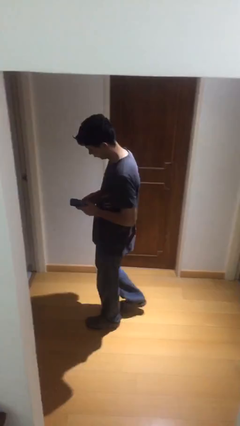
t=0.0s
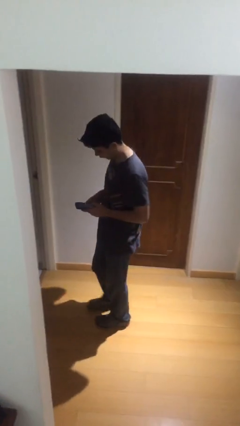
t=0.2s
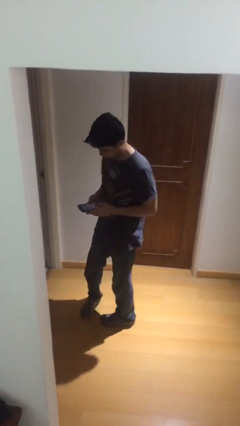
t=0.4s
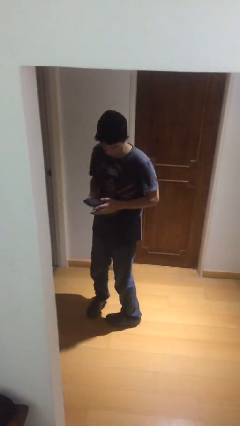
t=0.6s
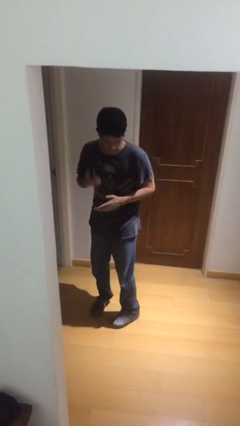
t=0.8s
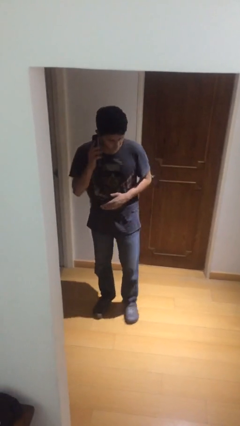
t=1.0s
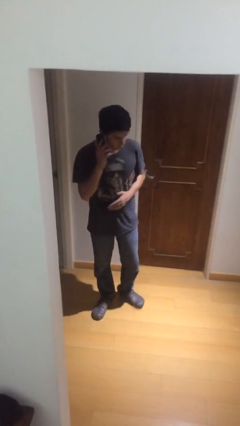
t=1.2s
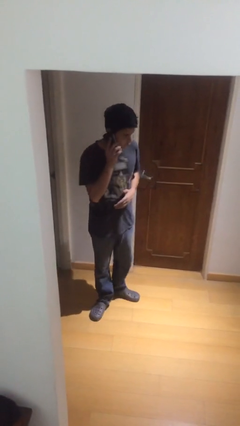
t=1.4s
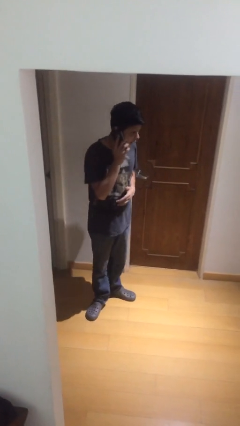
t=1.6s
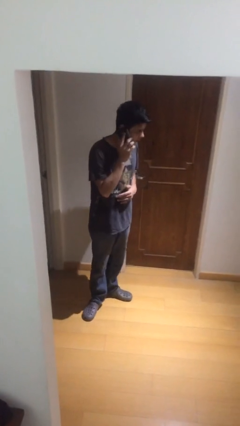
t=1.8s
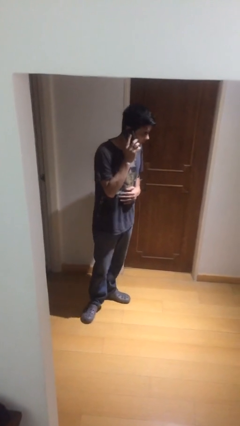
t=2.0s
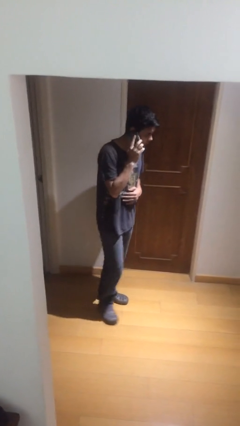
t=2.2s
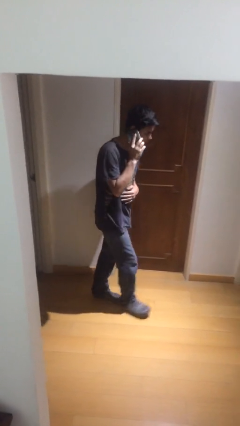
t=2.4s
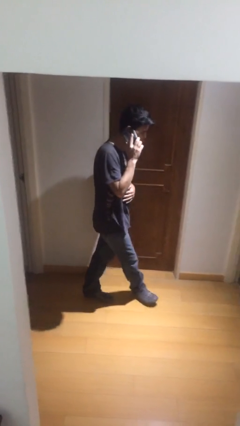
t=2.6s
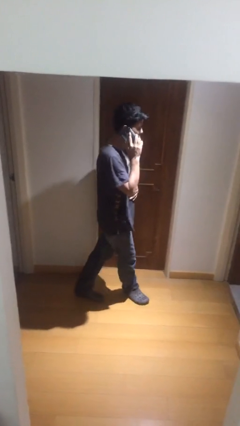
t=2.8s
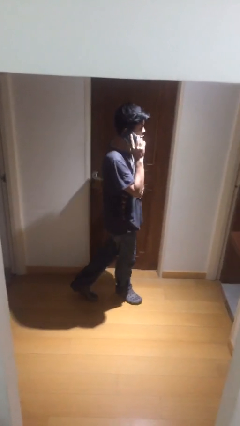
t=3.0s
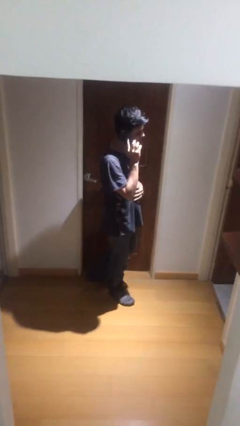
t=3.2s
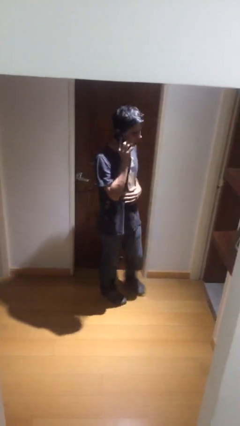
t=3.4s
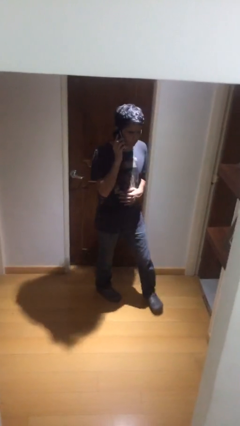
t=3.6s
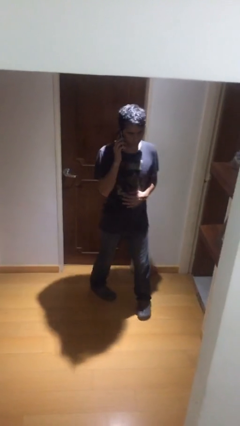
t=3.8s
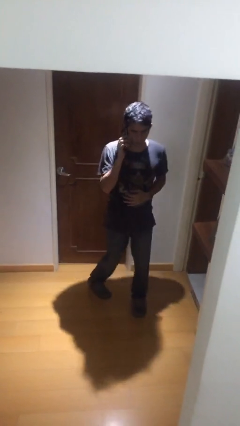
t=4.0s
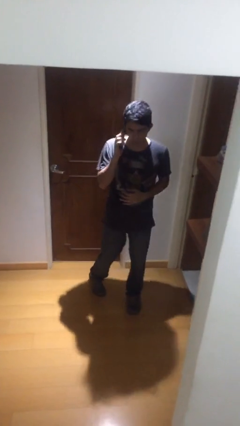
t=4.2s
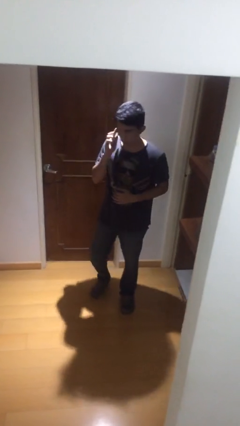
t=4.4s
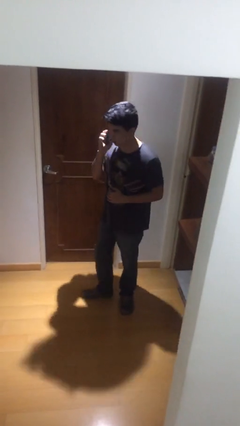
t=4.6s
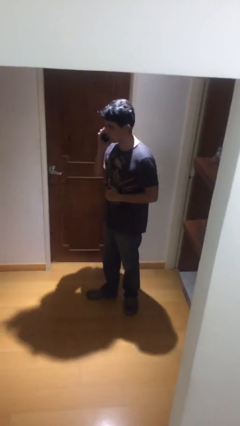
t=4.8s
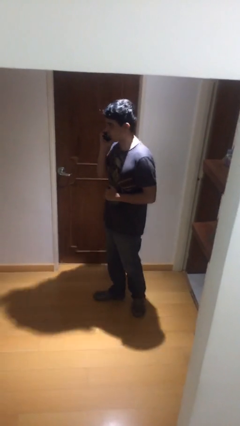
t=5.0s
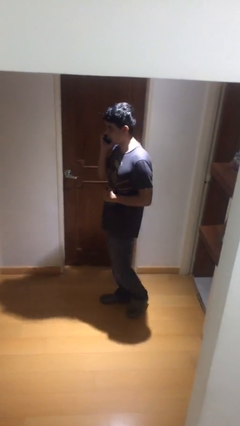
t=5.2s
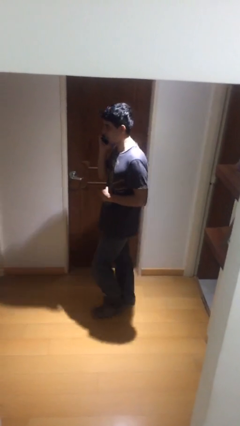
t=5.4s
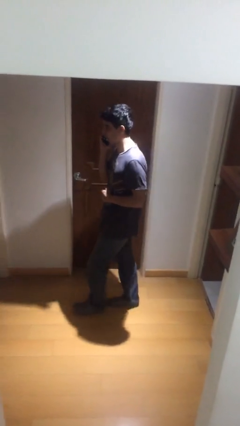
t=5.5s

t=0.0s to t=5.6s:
person talks on phone

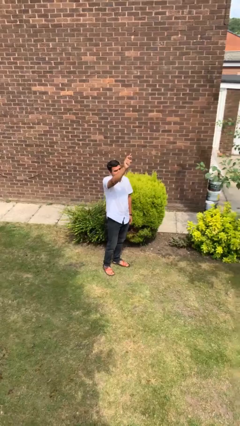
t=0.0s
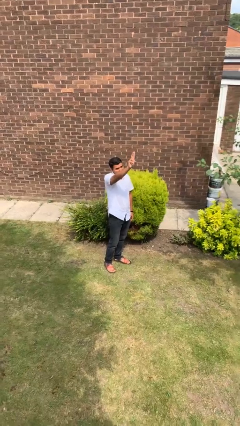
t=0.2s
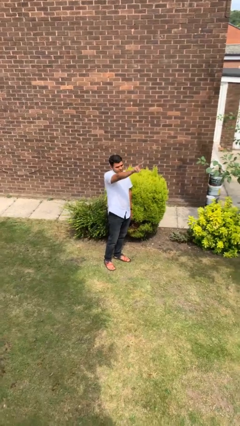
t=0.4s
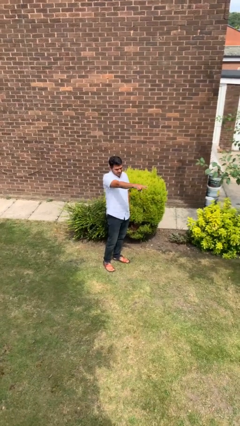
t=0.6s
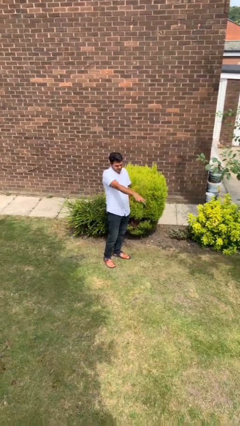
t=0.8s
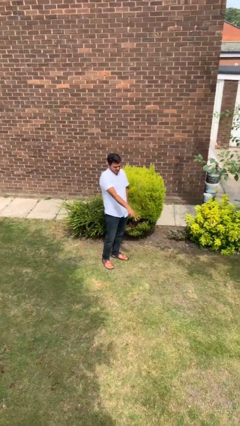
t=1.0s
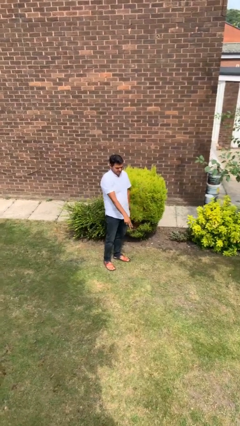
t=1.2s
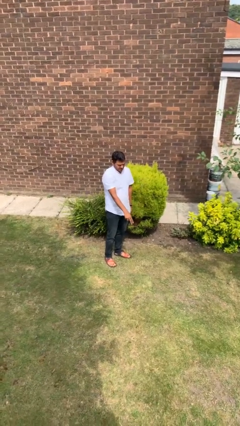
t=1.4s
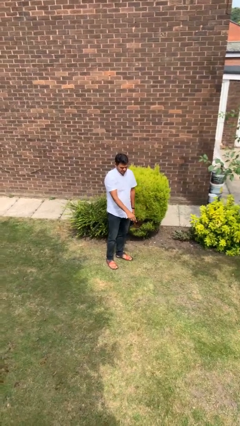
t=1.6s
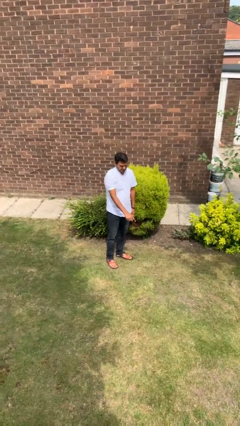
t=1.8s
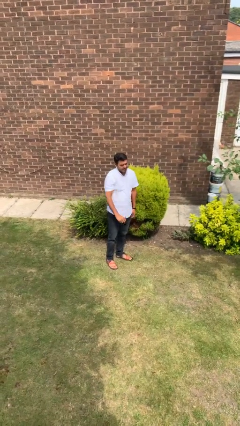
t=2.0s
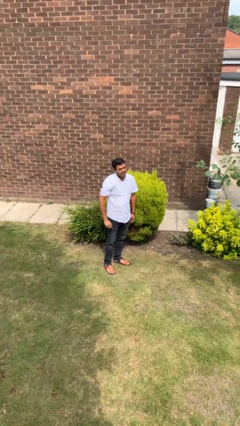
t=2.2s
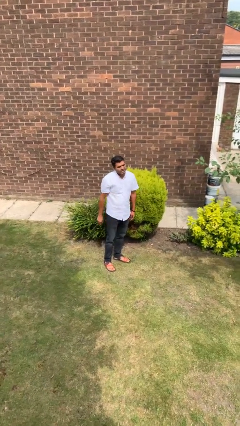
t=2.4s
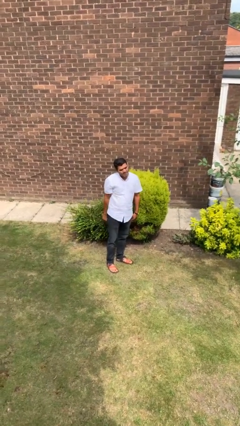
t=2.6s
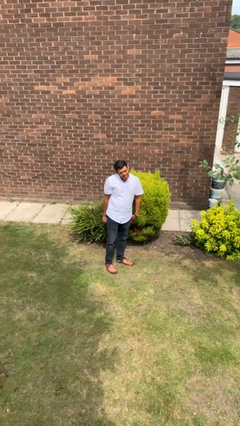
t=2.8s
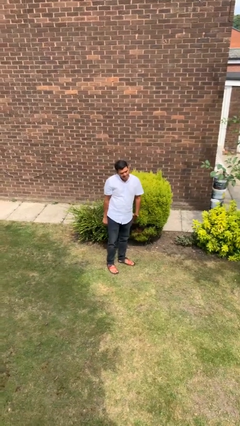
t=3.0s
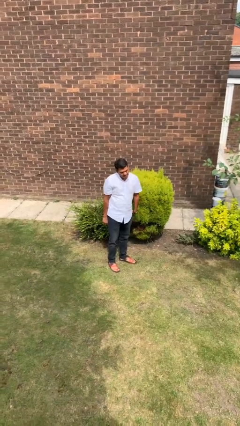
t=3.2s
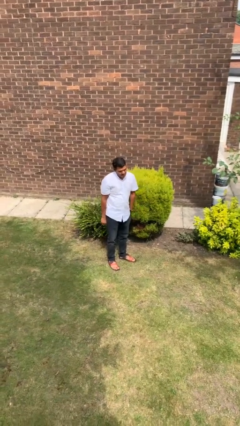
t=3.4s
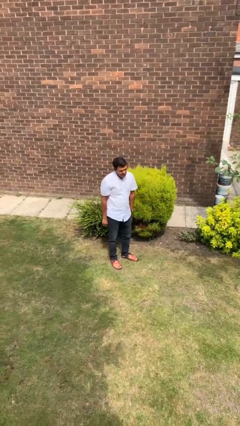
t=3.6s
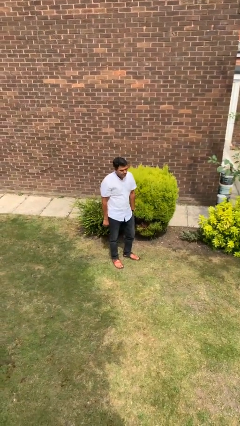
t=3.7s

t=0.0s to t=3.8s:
person gestures swipe down

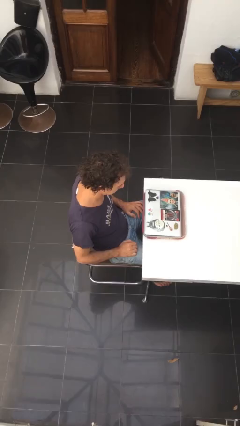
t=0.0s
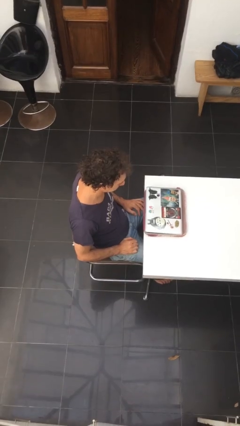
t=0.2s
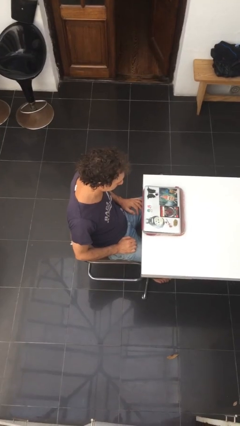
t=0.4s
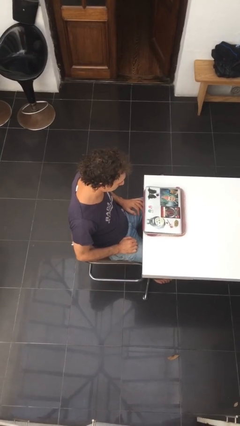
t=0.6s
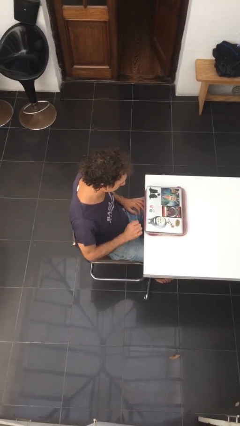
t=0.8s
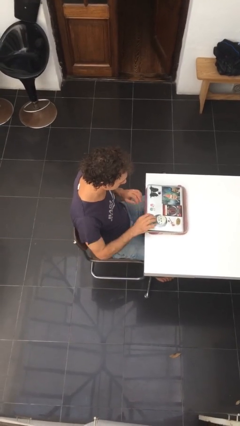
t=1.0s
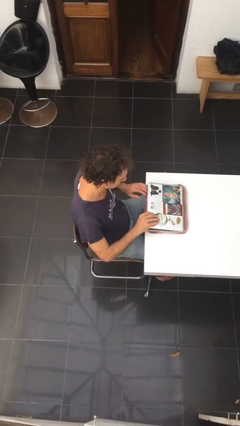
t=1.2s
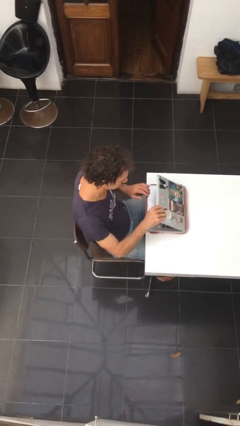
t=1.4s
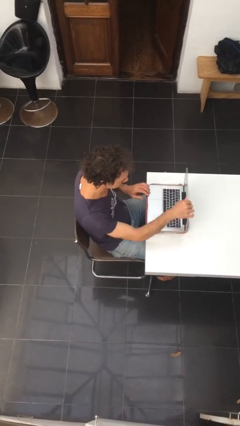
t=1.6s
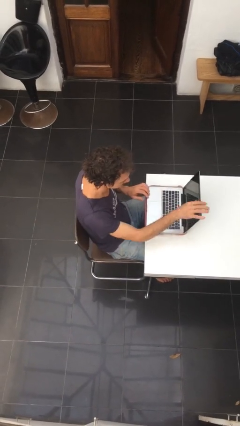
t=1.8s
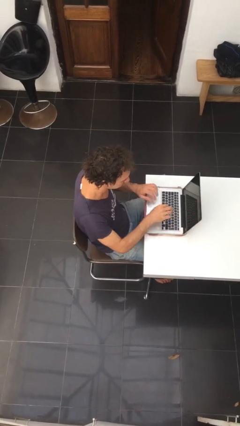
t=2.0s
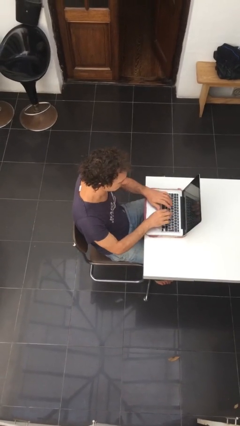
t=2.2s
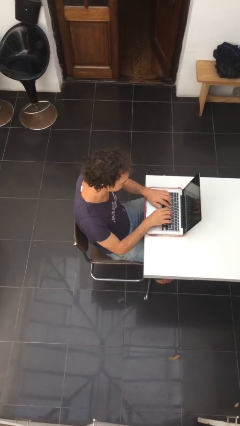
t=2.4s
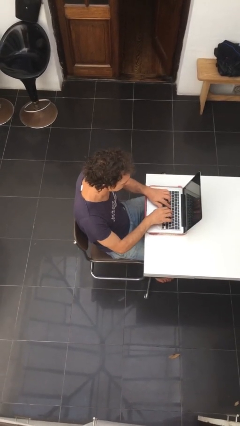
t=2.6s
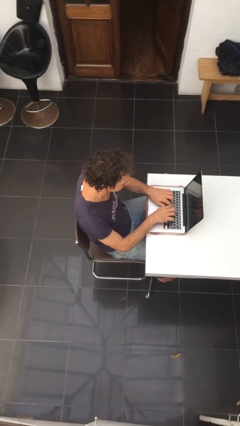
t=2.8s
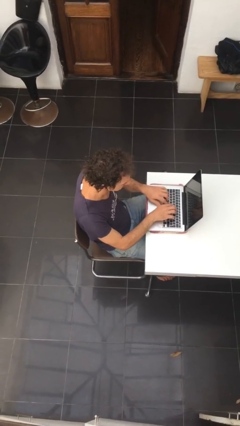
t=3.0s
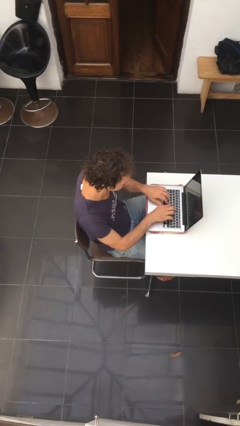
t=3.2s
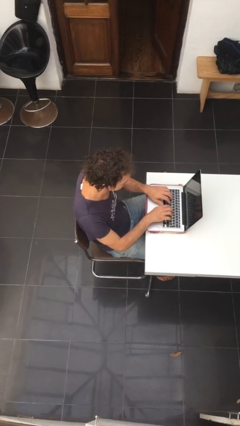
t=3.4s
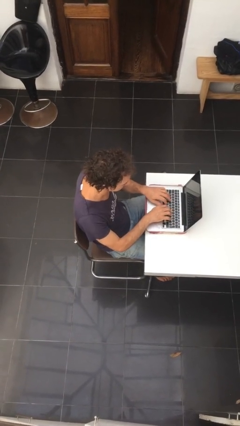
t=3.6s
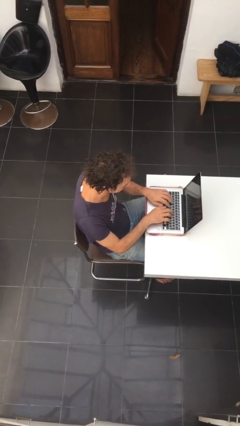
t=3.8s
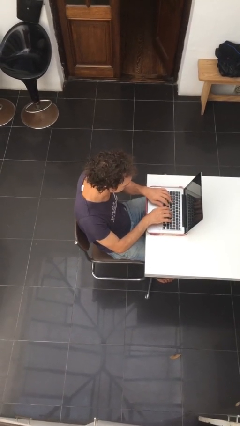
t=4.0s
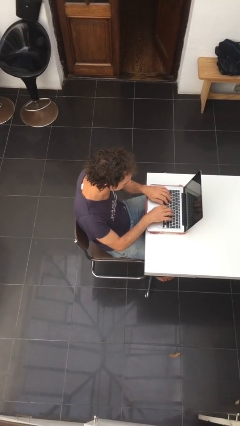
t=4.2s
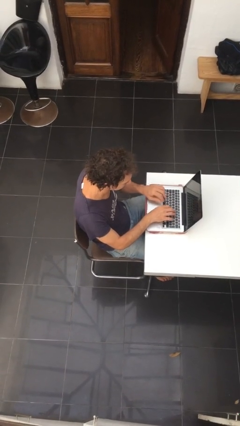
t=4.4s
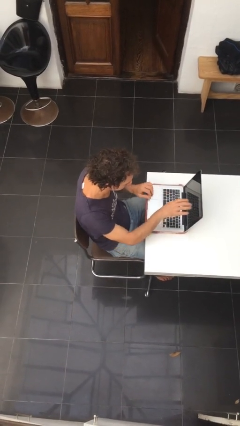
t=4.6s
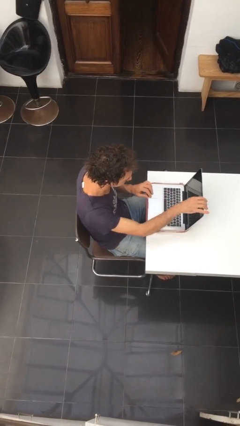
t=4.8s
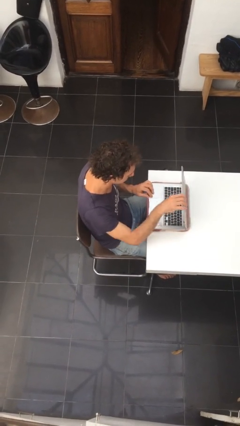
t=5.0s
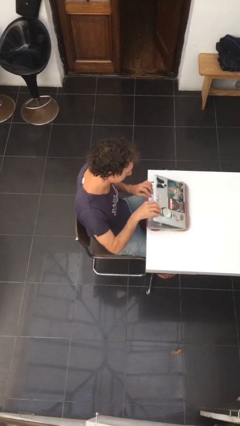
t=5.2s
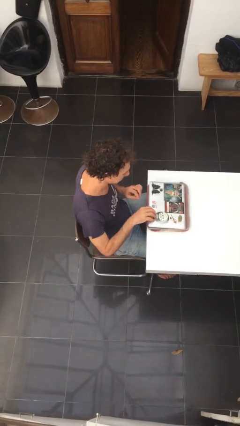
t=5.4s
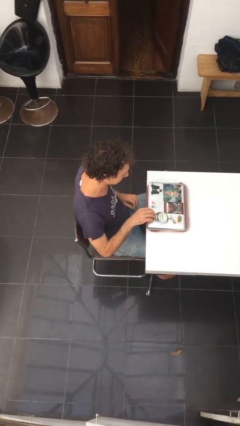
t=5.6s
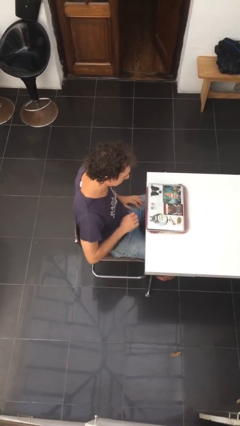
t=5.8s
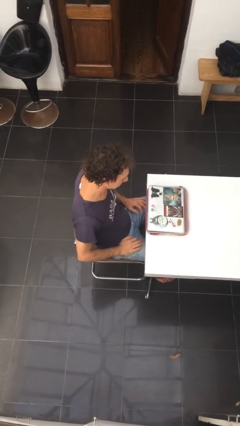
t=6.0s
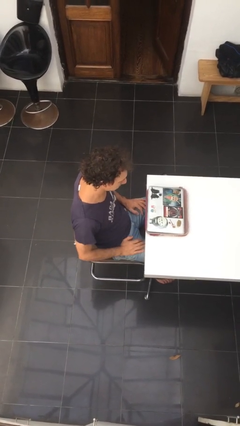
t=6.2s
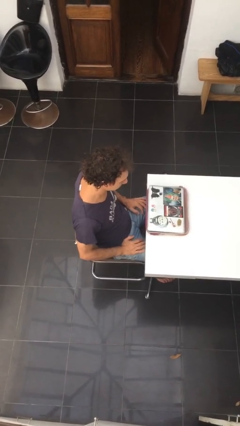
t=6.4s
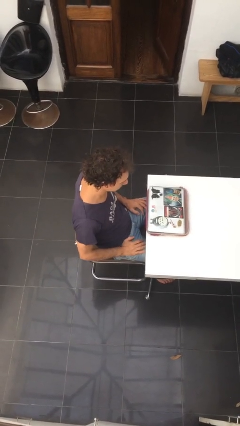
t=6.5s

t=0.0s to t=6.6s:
person interacts with laptop

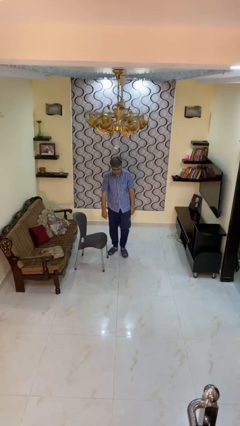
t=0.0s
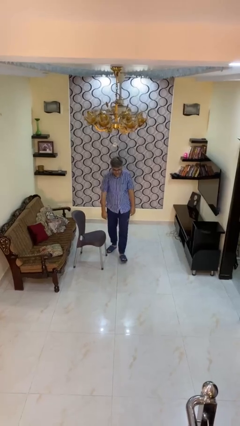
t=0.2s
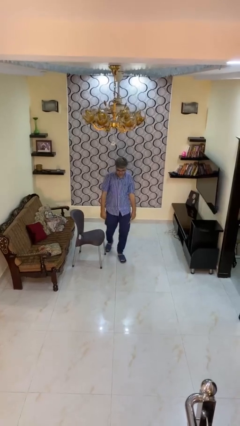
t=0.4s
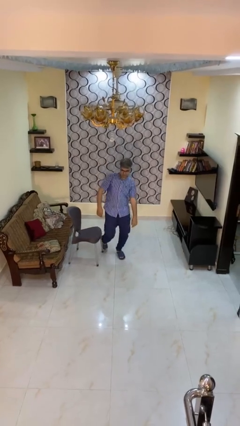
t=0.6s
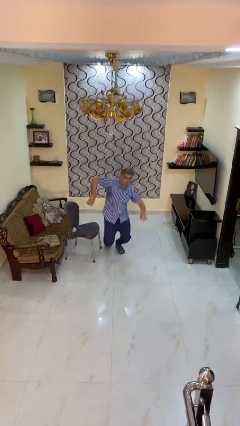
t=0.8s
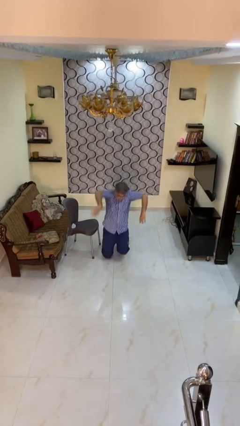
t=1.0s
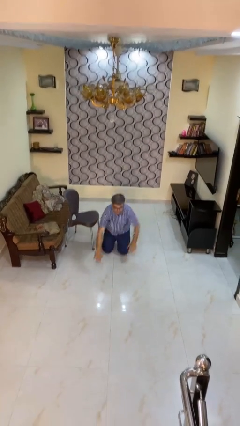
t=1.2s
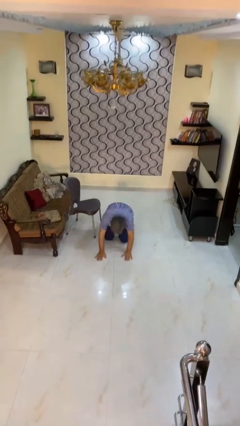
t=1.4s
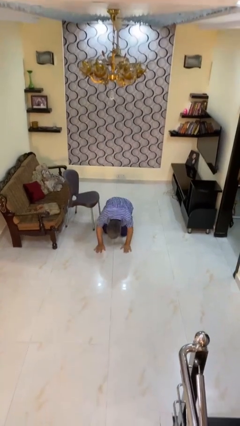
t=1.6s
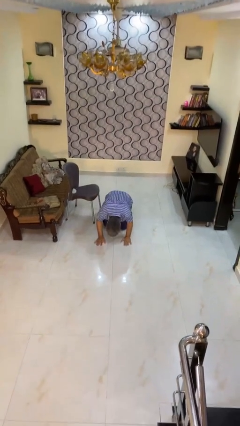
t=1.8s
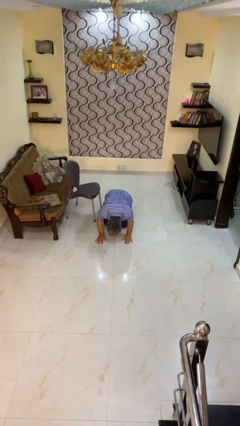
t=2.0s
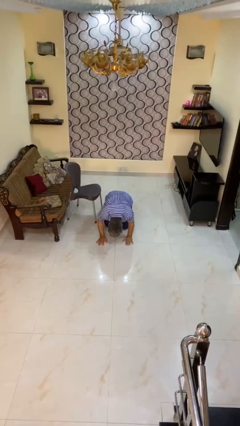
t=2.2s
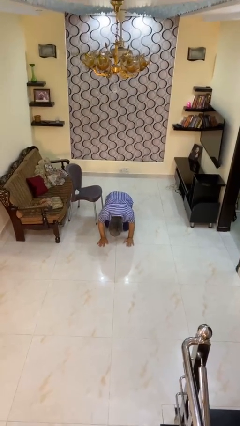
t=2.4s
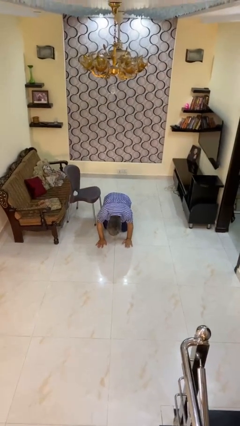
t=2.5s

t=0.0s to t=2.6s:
person trips on object on floor
